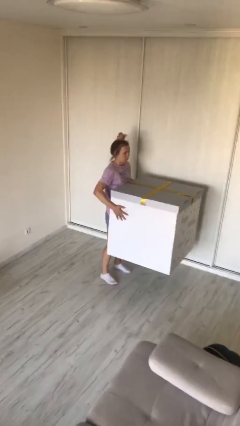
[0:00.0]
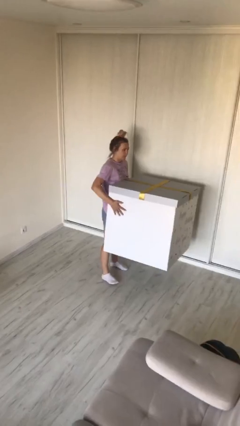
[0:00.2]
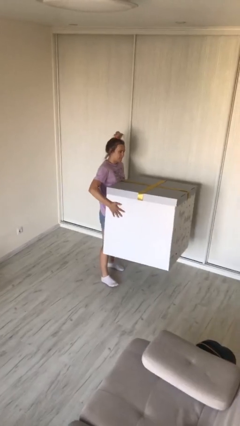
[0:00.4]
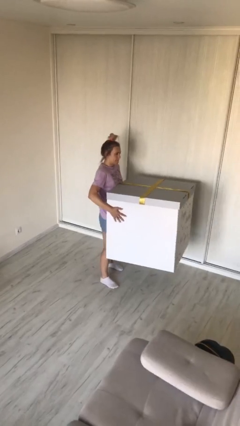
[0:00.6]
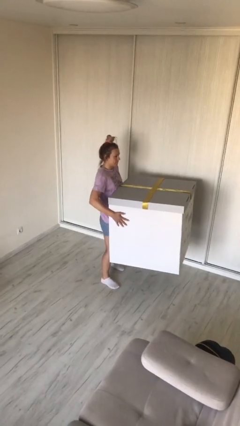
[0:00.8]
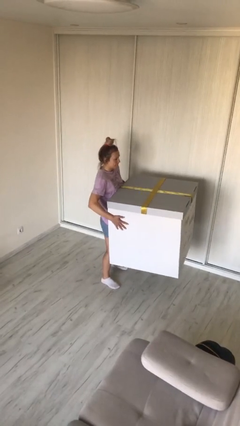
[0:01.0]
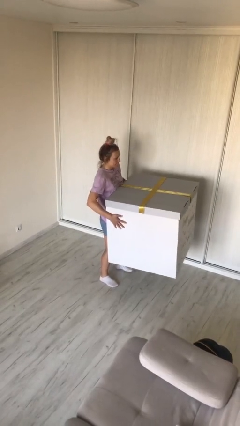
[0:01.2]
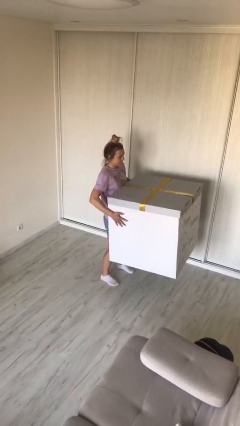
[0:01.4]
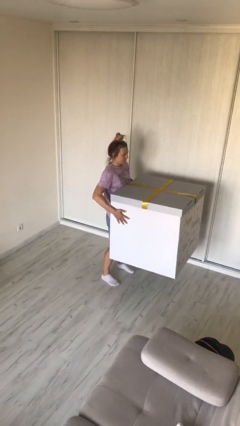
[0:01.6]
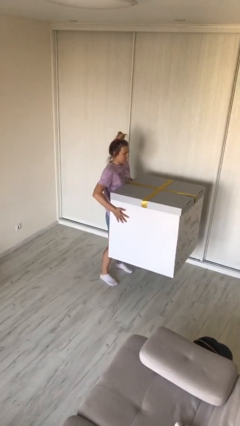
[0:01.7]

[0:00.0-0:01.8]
person carries furniture

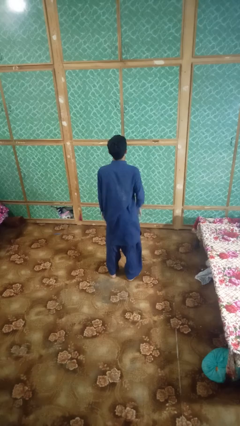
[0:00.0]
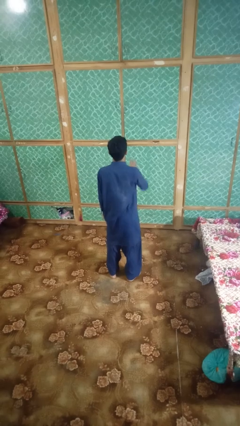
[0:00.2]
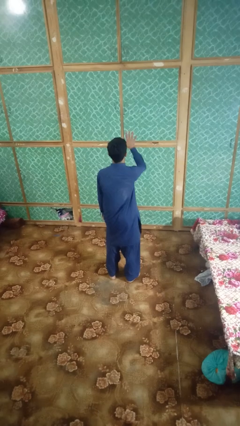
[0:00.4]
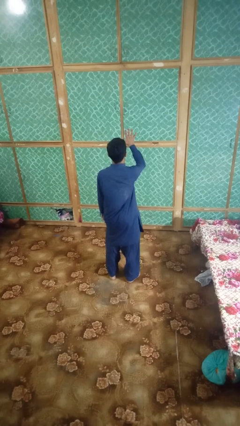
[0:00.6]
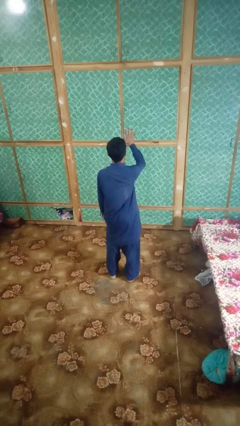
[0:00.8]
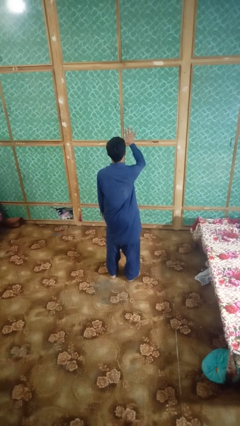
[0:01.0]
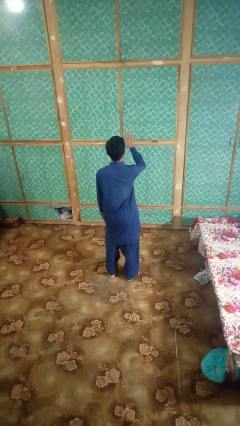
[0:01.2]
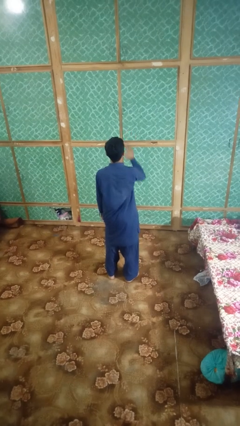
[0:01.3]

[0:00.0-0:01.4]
person gestures number five

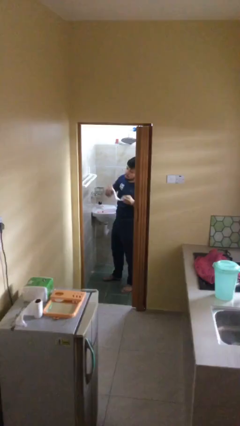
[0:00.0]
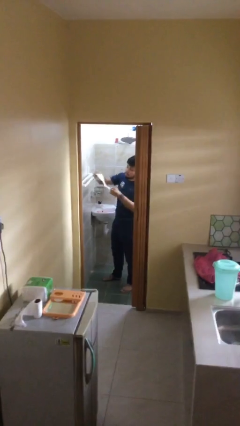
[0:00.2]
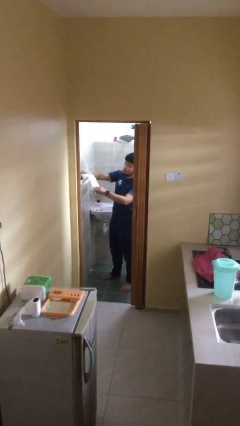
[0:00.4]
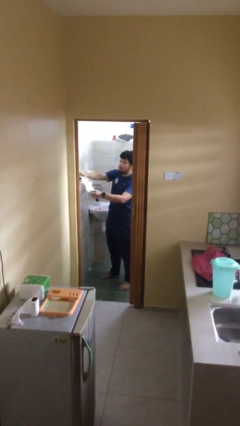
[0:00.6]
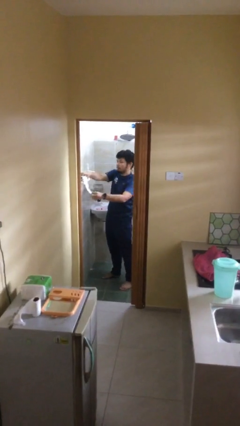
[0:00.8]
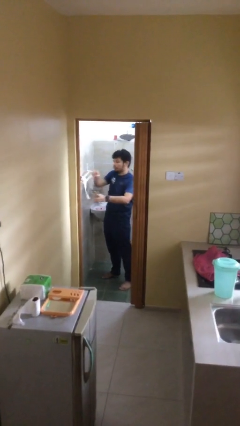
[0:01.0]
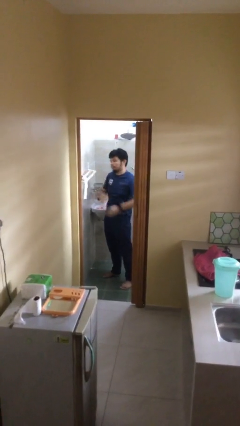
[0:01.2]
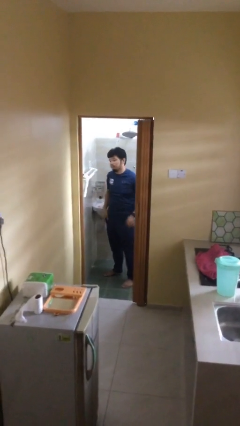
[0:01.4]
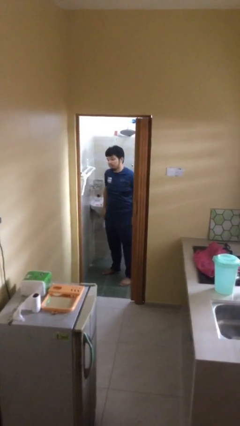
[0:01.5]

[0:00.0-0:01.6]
person puts down object on countertop

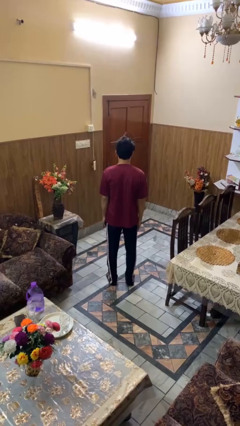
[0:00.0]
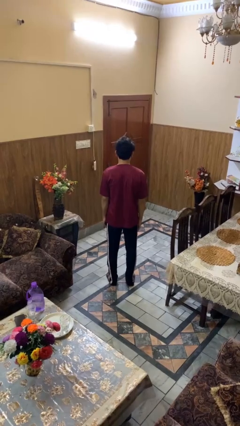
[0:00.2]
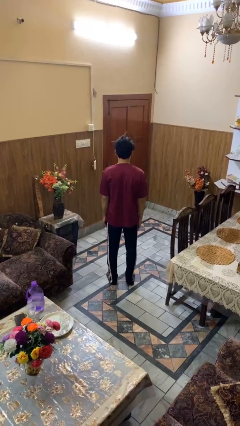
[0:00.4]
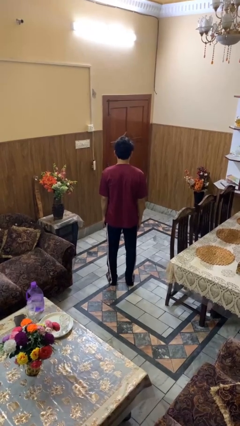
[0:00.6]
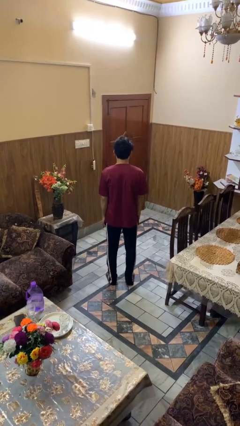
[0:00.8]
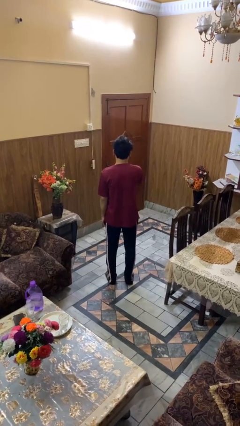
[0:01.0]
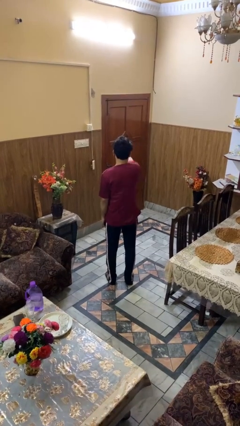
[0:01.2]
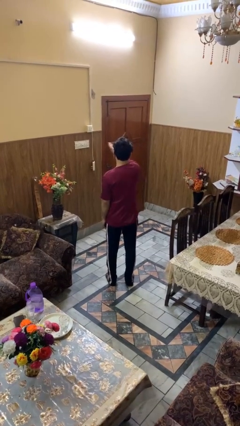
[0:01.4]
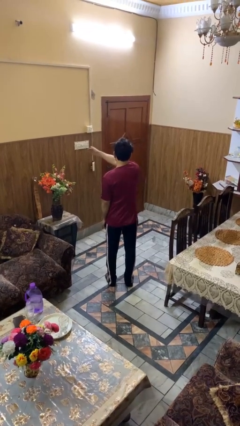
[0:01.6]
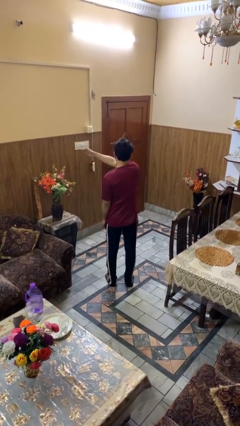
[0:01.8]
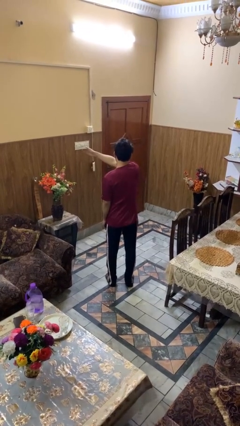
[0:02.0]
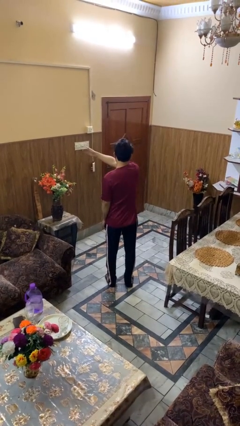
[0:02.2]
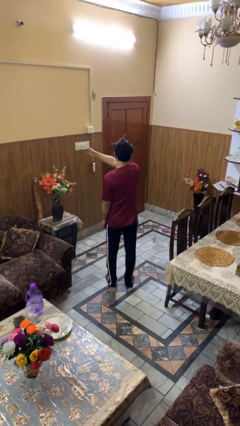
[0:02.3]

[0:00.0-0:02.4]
person gestures swipe left

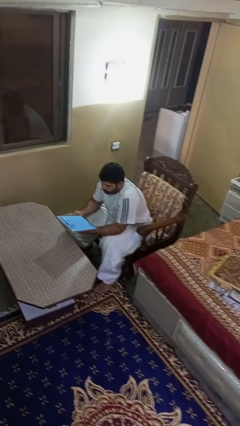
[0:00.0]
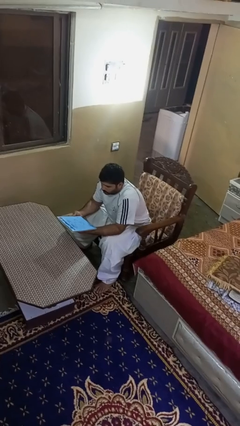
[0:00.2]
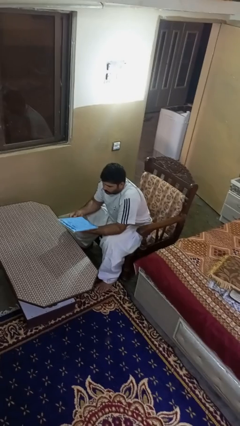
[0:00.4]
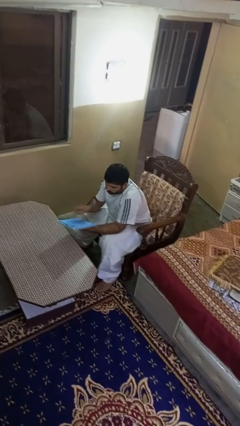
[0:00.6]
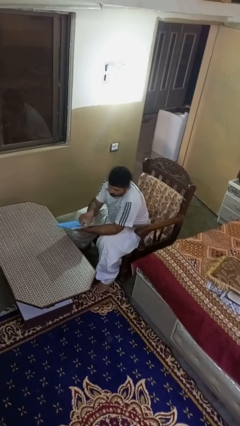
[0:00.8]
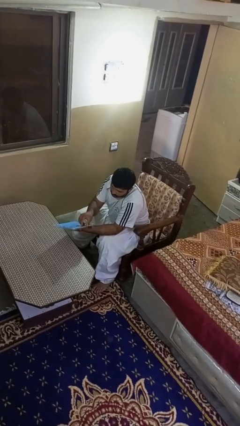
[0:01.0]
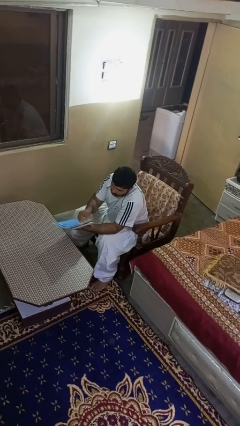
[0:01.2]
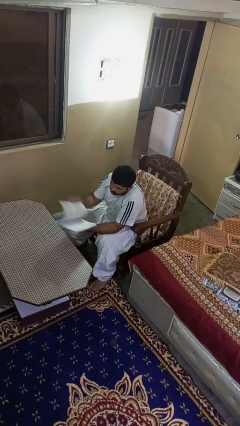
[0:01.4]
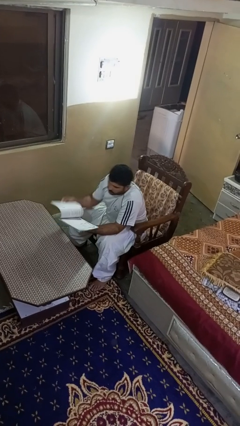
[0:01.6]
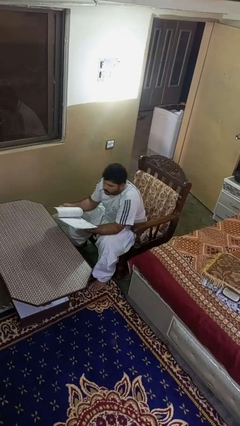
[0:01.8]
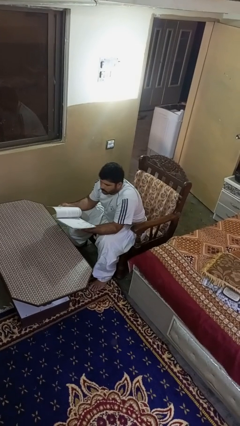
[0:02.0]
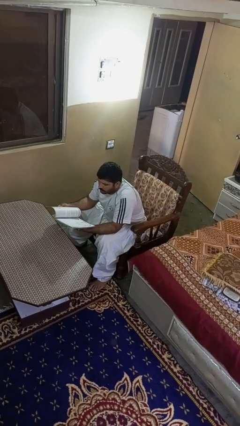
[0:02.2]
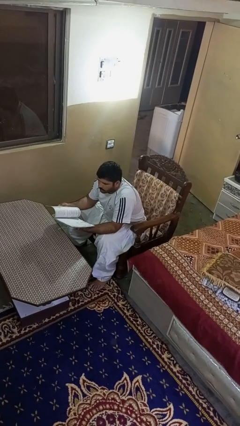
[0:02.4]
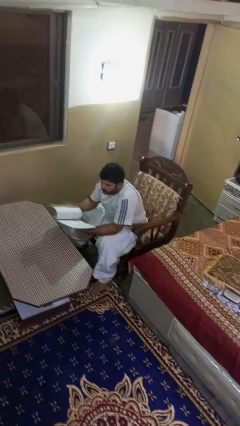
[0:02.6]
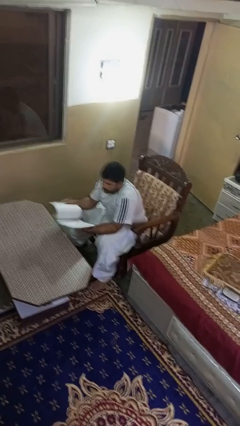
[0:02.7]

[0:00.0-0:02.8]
person reads magazine

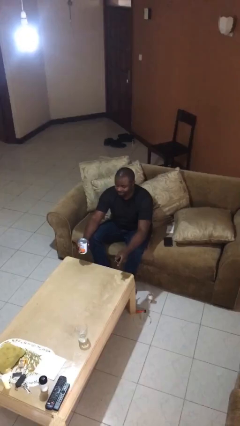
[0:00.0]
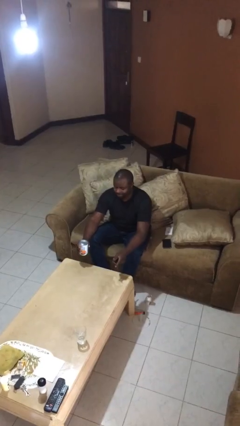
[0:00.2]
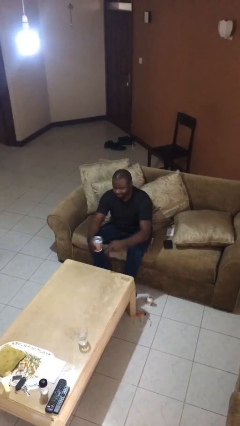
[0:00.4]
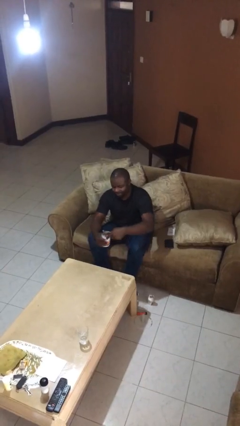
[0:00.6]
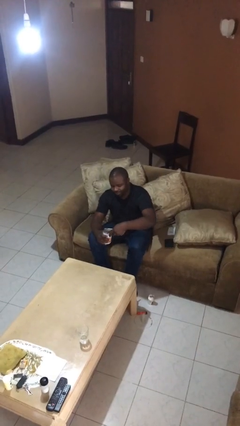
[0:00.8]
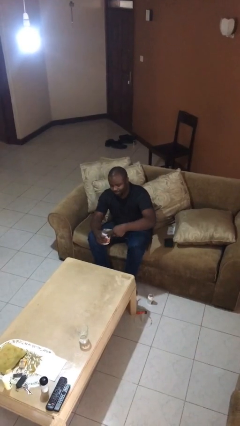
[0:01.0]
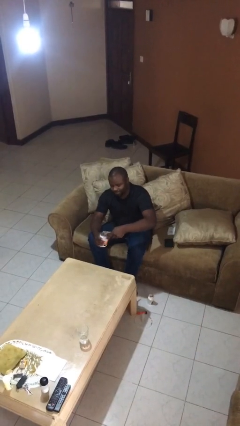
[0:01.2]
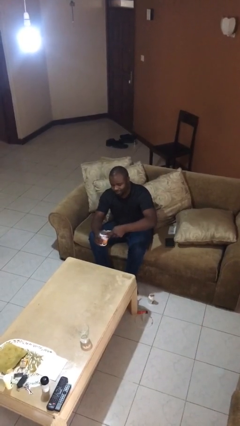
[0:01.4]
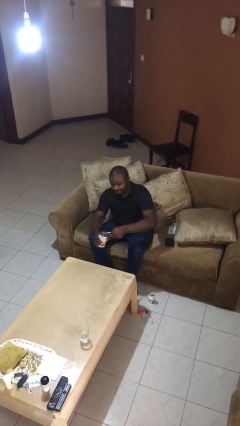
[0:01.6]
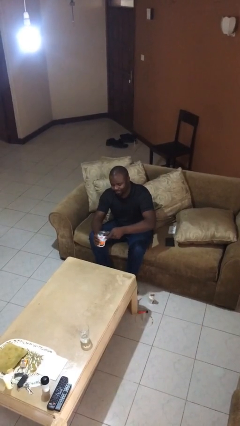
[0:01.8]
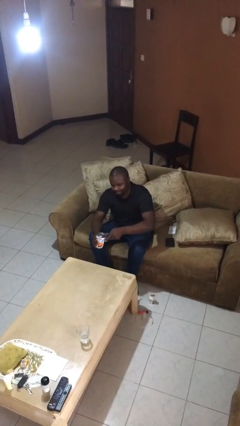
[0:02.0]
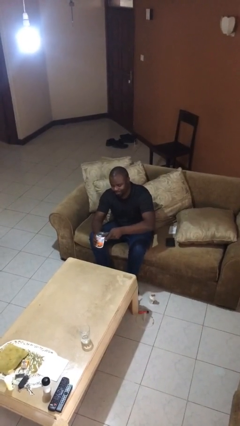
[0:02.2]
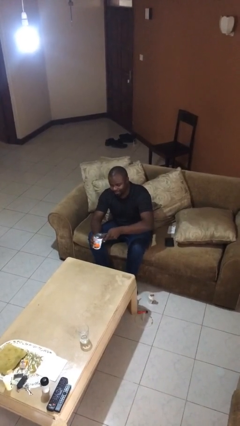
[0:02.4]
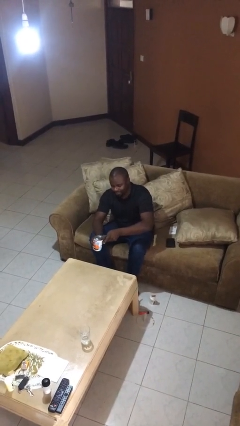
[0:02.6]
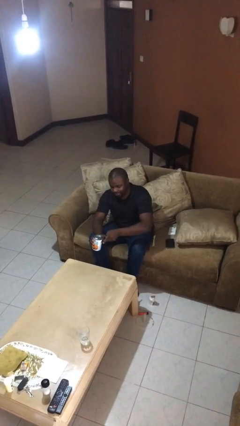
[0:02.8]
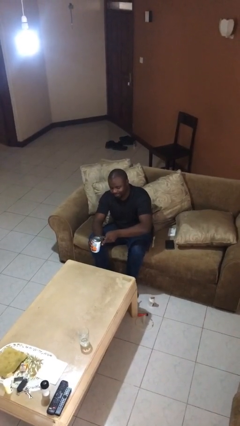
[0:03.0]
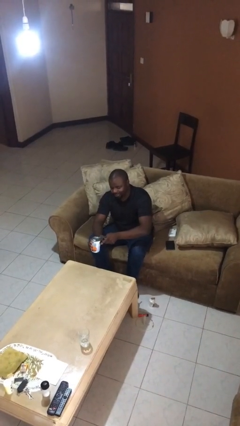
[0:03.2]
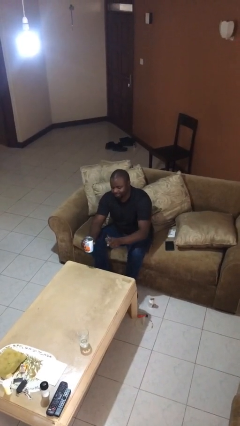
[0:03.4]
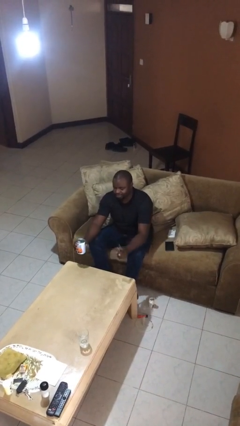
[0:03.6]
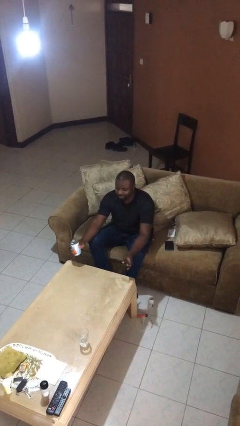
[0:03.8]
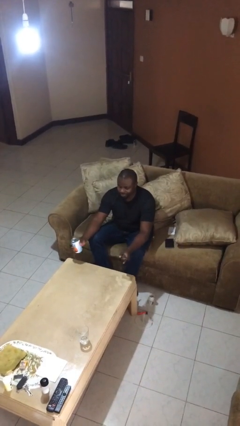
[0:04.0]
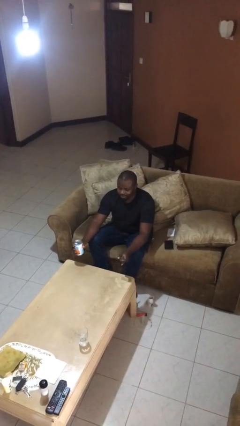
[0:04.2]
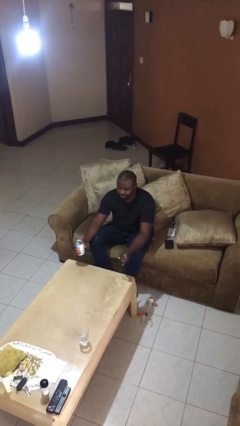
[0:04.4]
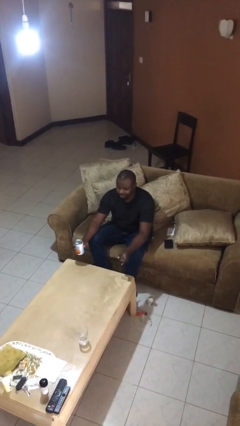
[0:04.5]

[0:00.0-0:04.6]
person opens can with can opener

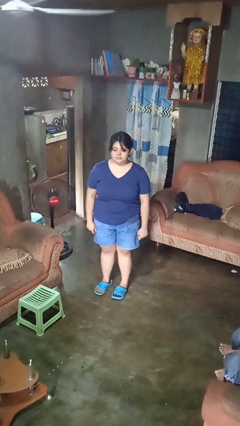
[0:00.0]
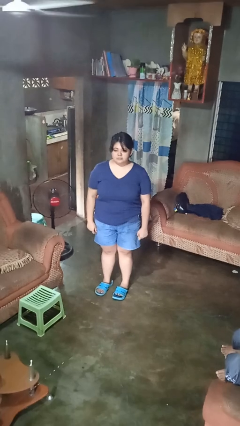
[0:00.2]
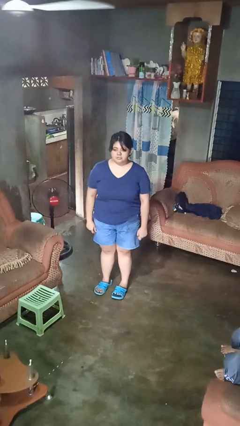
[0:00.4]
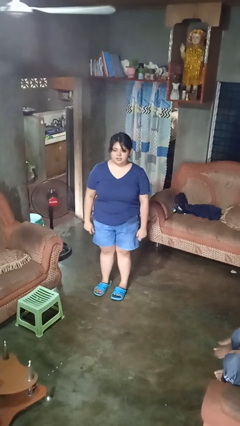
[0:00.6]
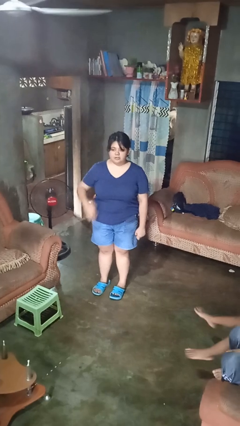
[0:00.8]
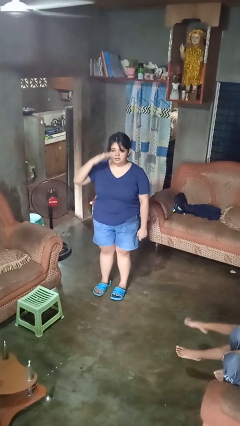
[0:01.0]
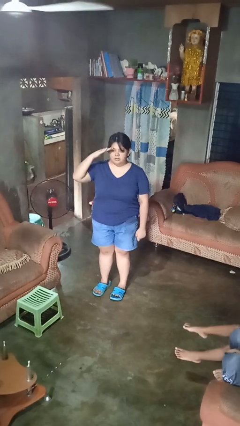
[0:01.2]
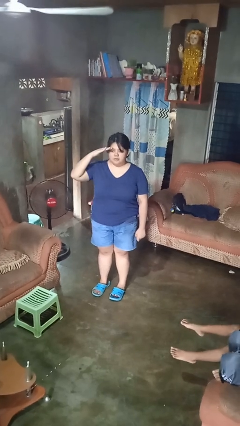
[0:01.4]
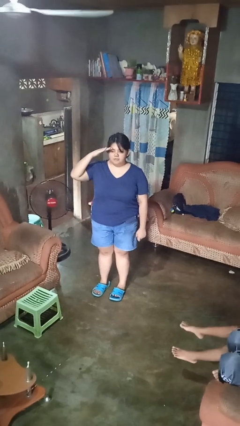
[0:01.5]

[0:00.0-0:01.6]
person salutes

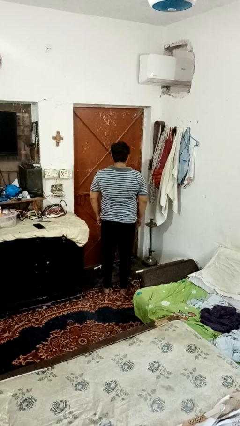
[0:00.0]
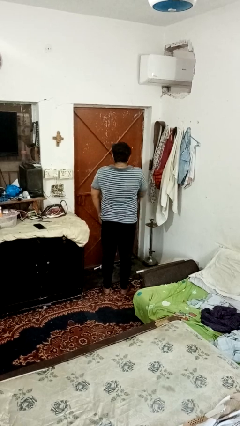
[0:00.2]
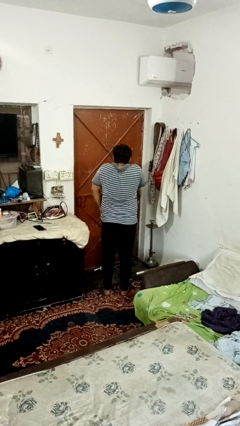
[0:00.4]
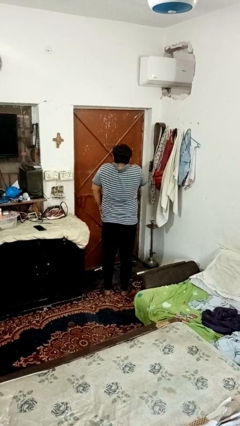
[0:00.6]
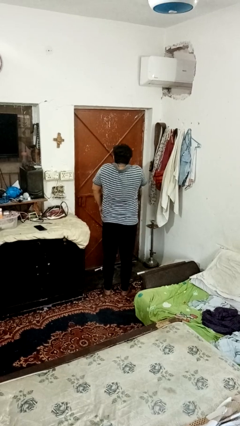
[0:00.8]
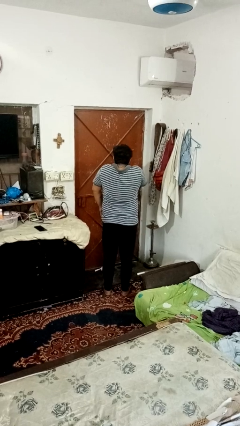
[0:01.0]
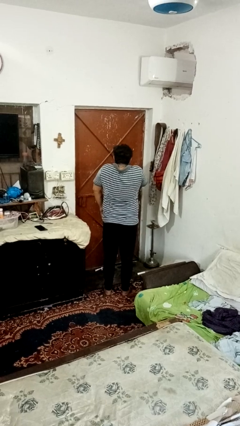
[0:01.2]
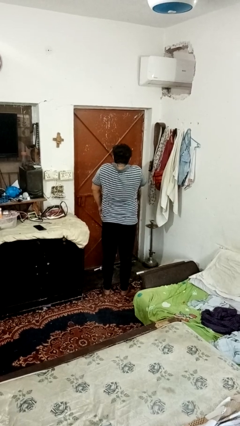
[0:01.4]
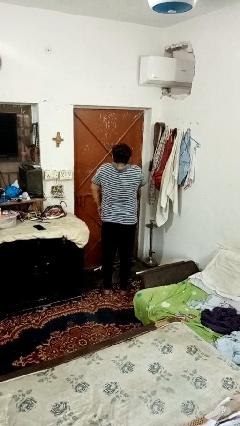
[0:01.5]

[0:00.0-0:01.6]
person shrugs
